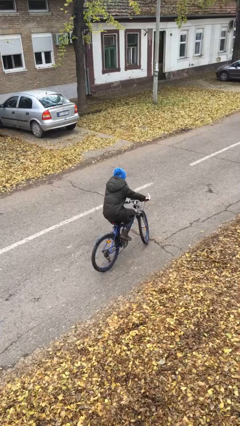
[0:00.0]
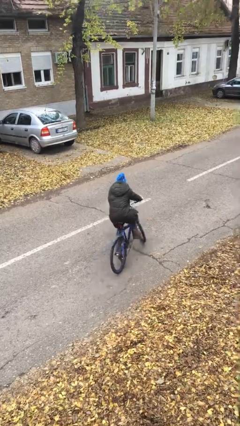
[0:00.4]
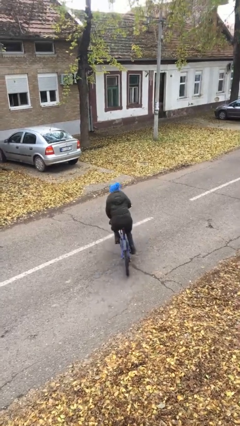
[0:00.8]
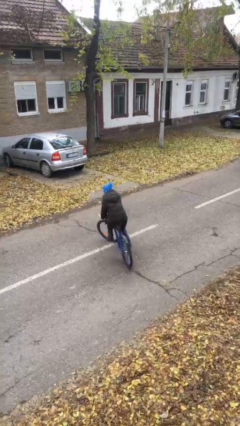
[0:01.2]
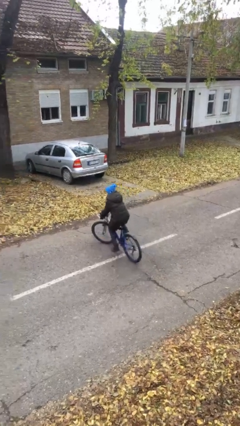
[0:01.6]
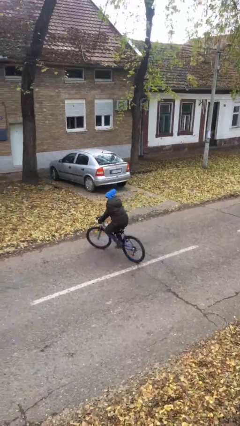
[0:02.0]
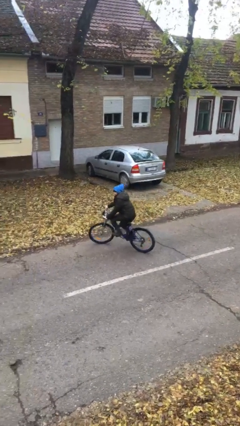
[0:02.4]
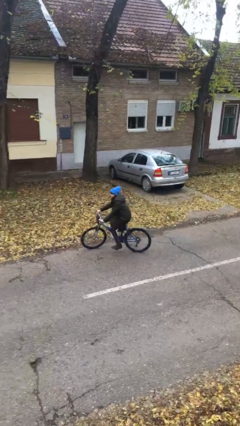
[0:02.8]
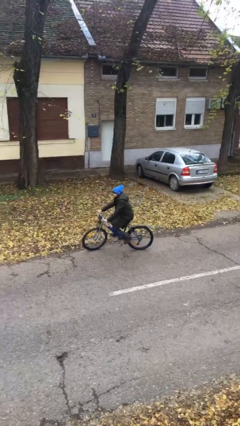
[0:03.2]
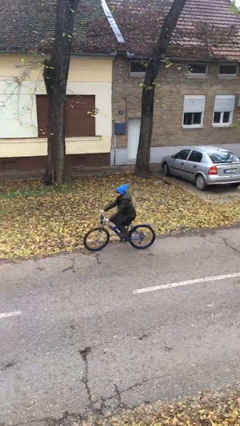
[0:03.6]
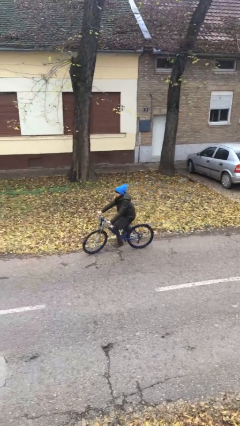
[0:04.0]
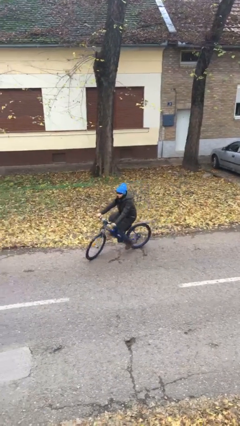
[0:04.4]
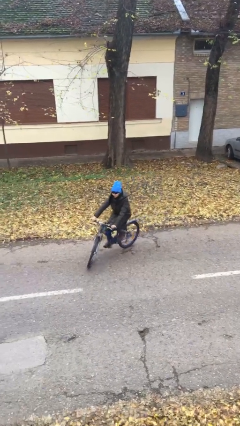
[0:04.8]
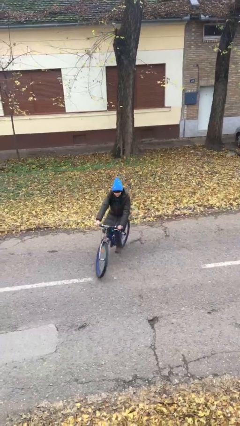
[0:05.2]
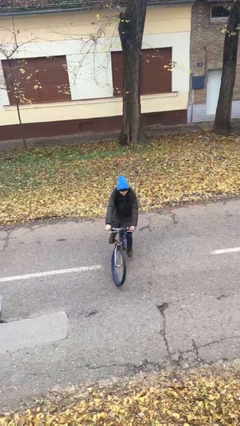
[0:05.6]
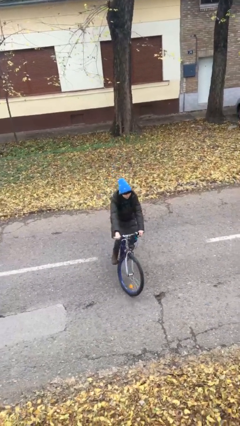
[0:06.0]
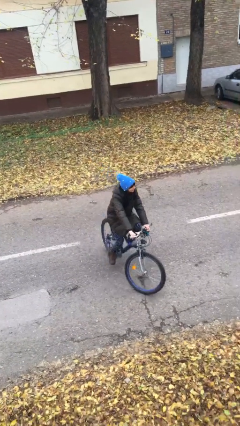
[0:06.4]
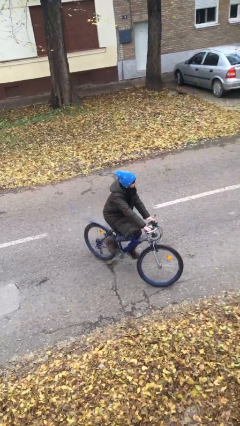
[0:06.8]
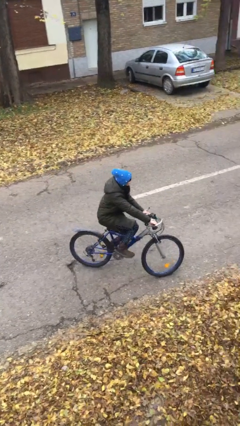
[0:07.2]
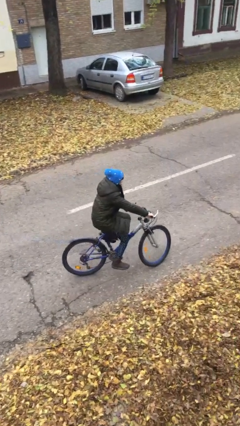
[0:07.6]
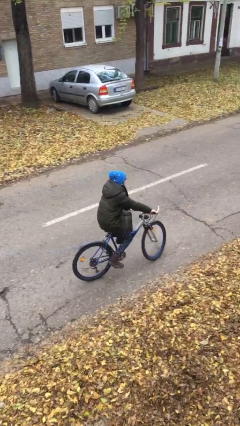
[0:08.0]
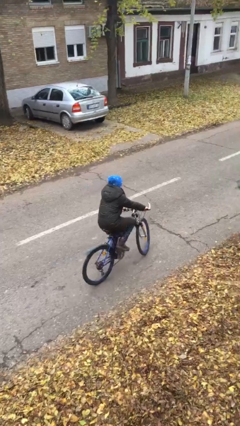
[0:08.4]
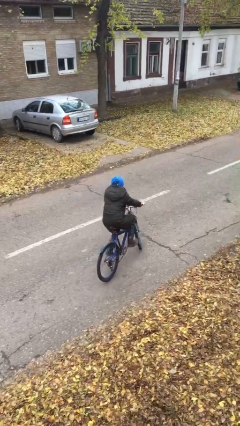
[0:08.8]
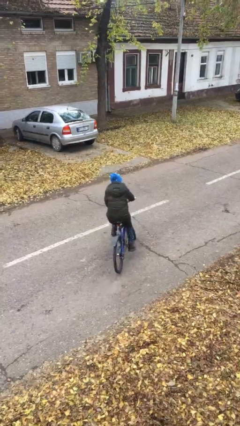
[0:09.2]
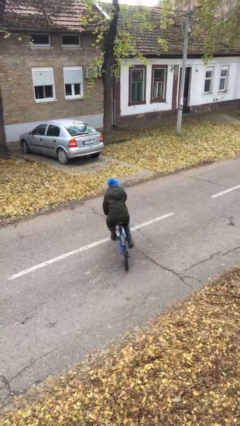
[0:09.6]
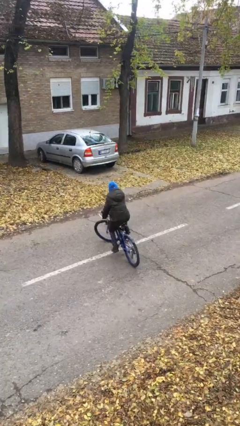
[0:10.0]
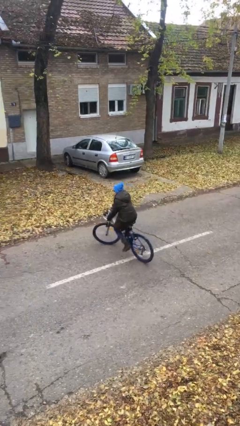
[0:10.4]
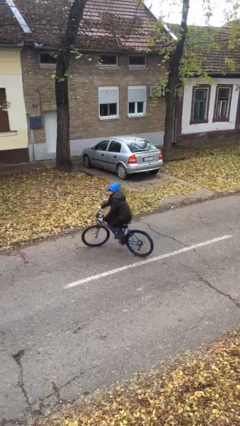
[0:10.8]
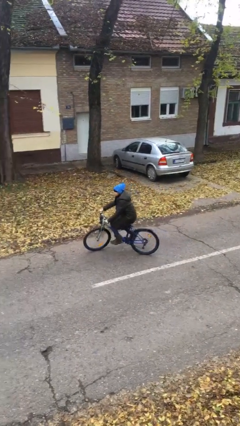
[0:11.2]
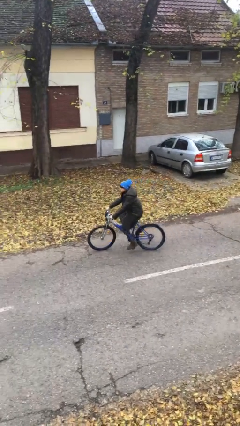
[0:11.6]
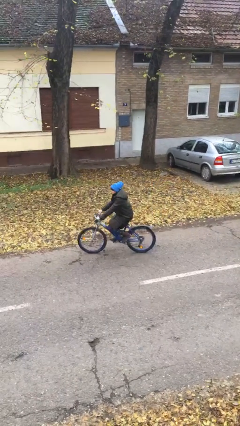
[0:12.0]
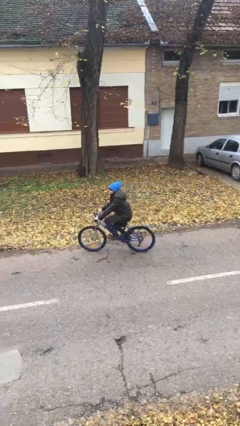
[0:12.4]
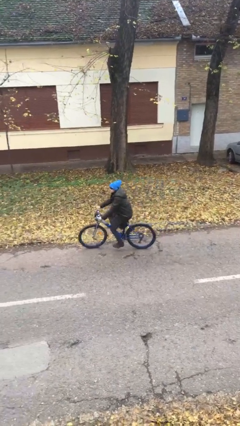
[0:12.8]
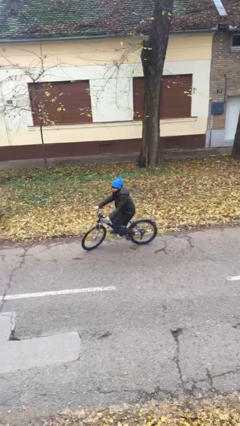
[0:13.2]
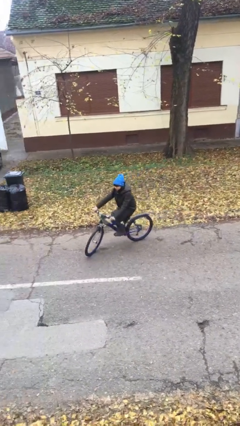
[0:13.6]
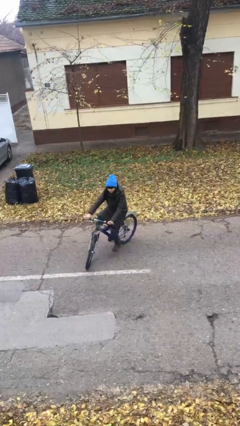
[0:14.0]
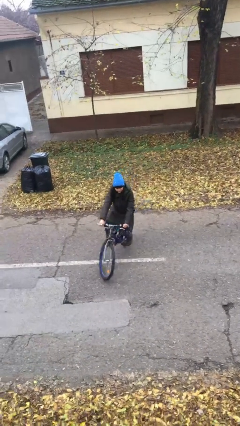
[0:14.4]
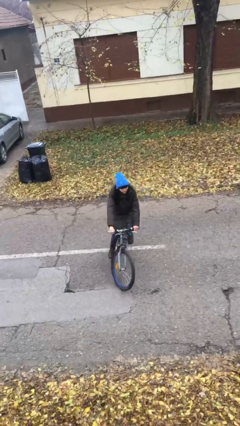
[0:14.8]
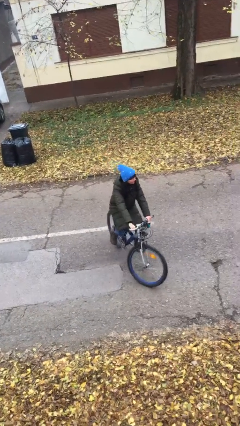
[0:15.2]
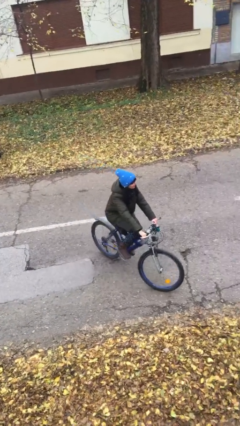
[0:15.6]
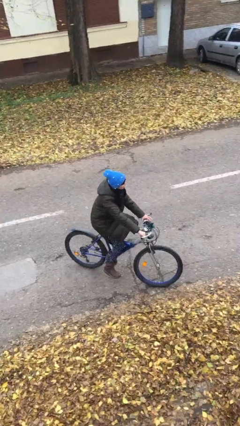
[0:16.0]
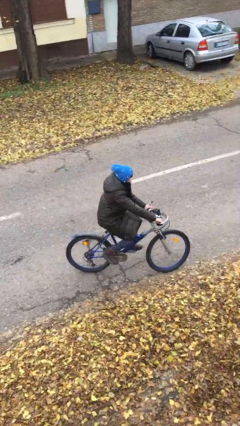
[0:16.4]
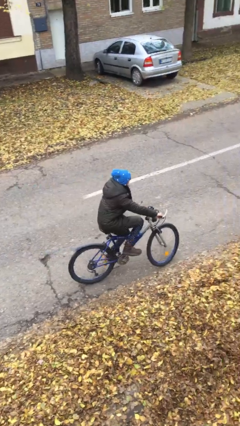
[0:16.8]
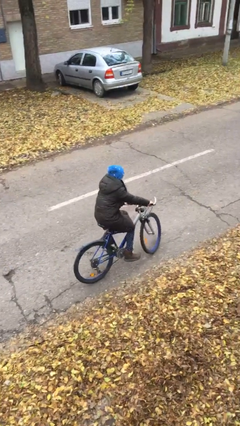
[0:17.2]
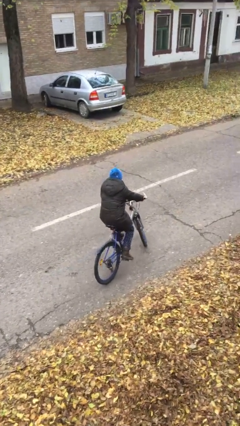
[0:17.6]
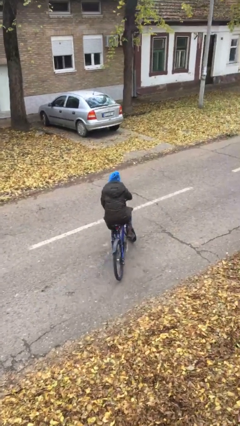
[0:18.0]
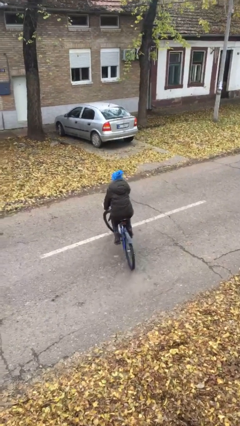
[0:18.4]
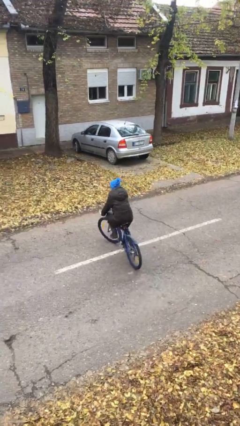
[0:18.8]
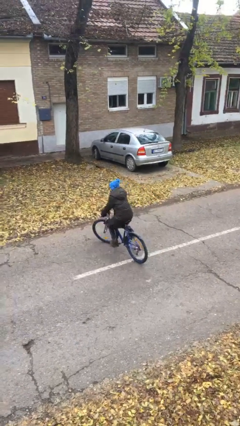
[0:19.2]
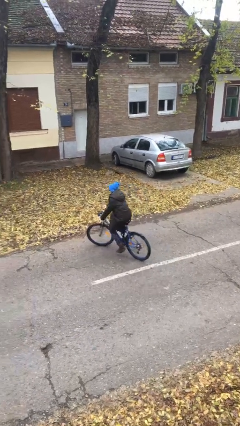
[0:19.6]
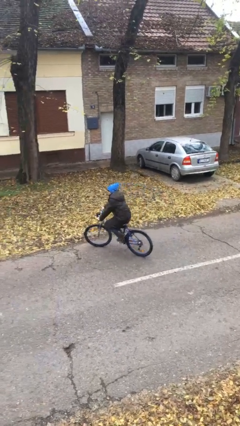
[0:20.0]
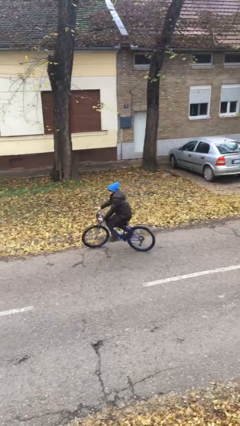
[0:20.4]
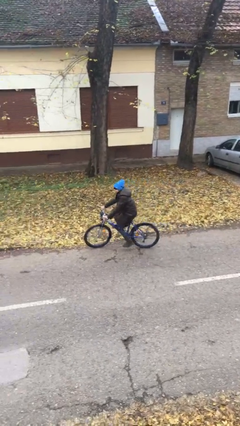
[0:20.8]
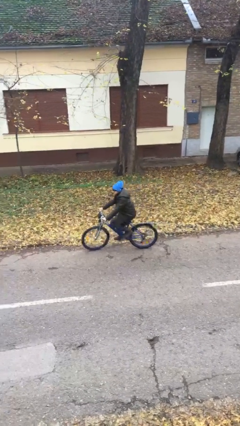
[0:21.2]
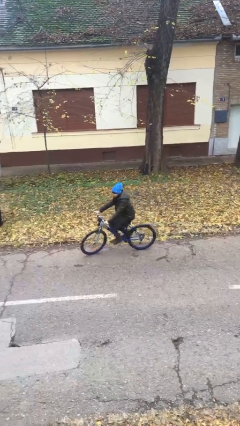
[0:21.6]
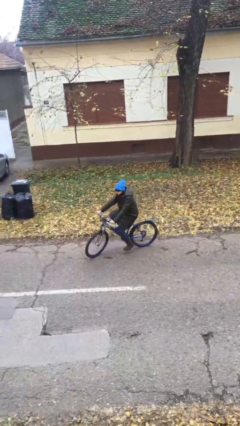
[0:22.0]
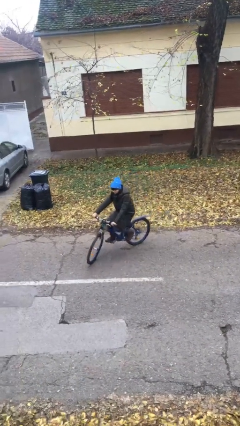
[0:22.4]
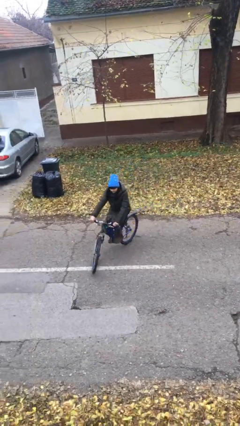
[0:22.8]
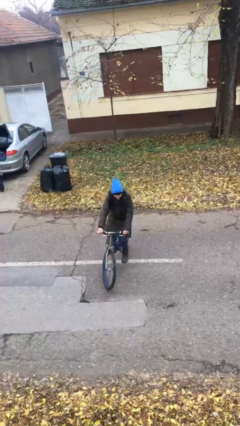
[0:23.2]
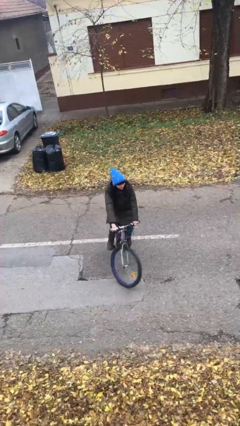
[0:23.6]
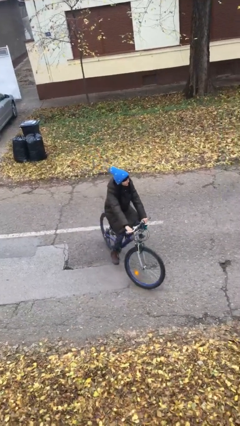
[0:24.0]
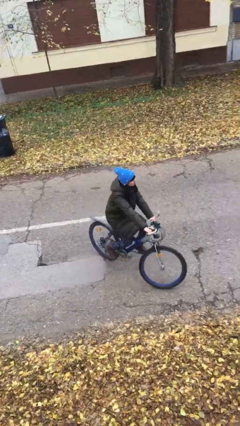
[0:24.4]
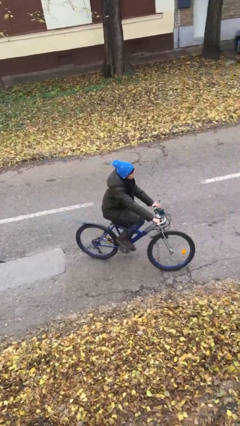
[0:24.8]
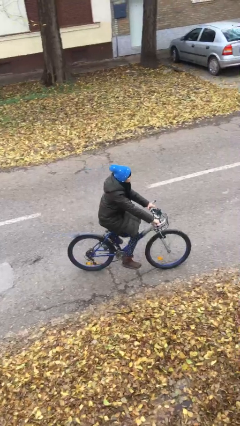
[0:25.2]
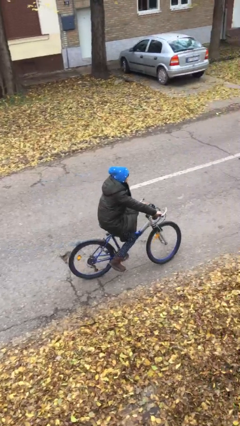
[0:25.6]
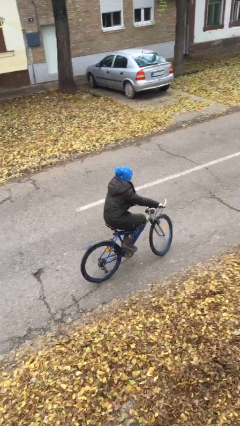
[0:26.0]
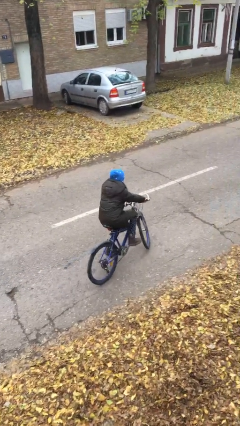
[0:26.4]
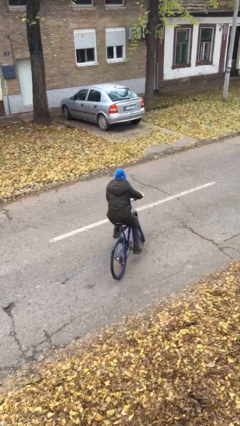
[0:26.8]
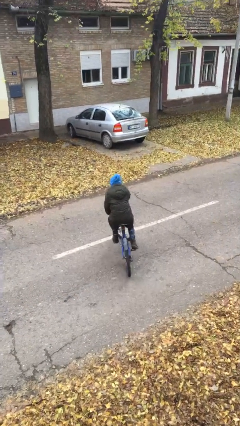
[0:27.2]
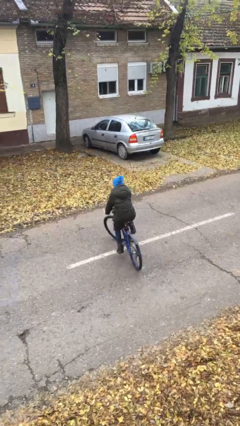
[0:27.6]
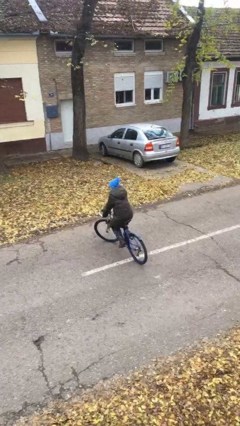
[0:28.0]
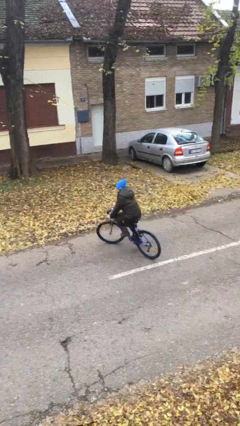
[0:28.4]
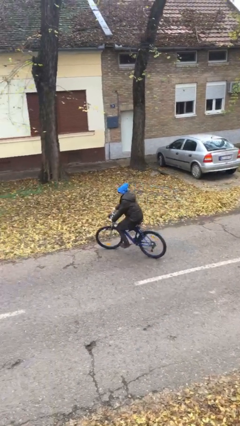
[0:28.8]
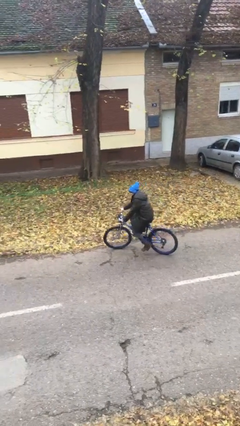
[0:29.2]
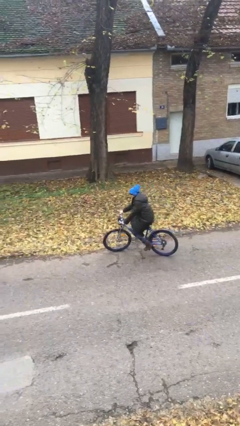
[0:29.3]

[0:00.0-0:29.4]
person rides bicycle

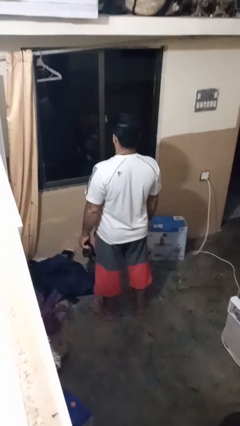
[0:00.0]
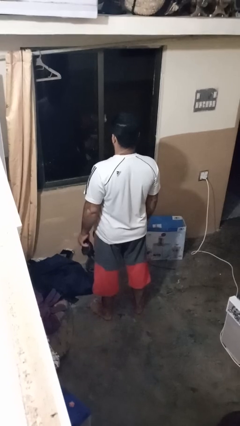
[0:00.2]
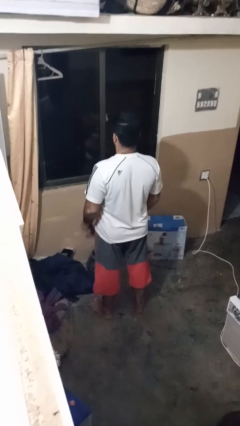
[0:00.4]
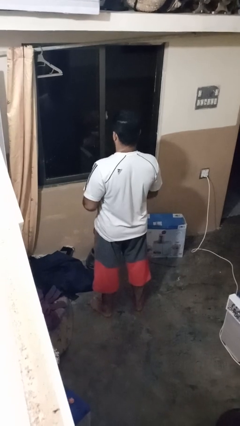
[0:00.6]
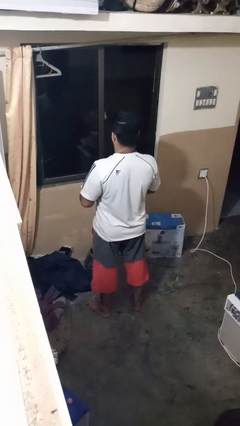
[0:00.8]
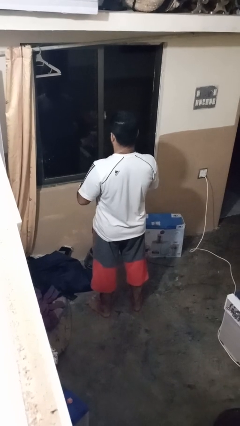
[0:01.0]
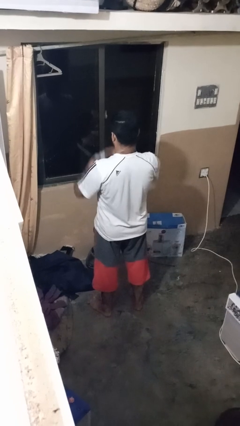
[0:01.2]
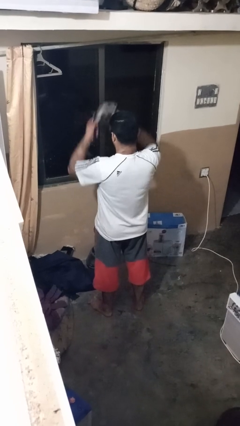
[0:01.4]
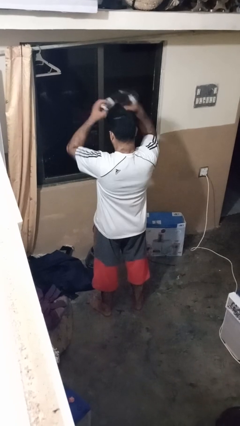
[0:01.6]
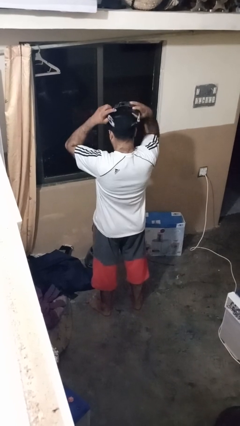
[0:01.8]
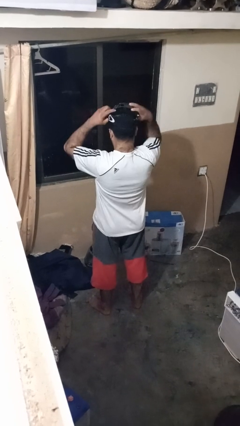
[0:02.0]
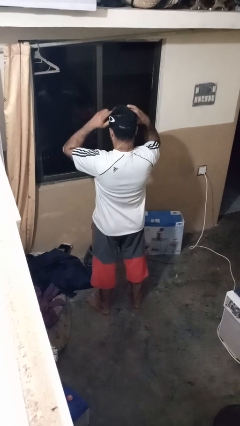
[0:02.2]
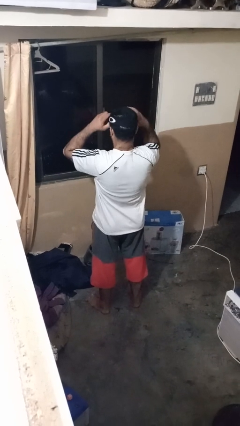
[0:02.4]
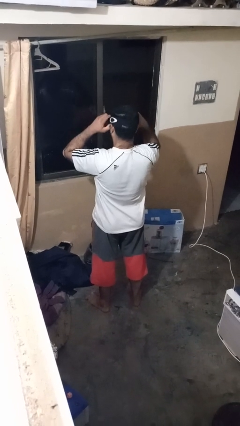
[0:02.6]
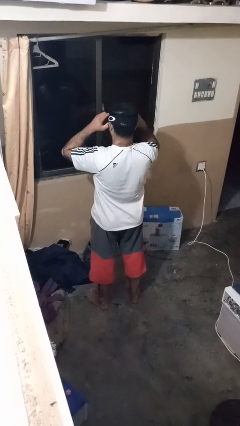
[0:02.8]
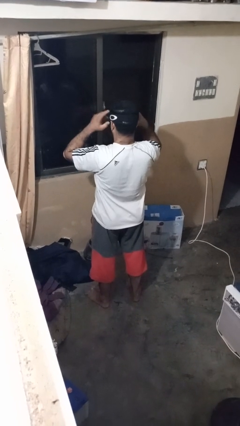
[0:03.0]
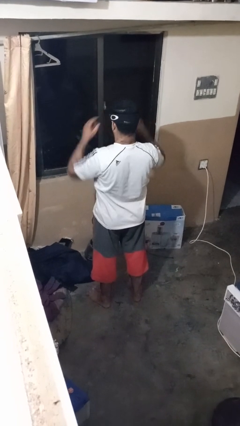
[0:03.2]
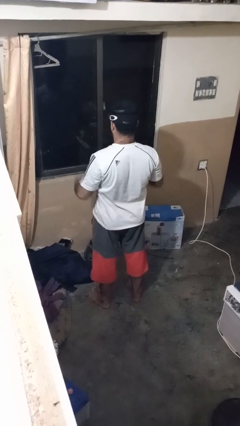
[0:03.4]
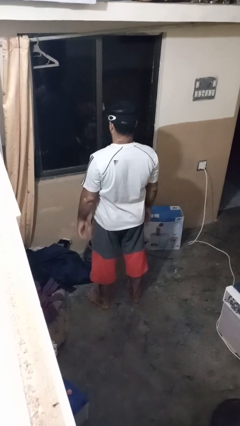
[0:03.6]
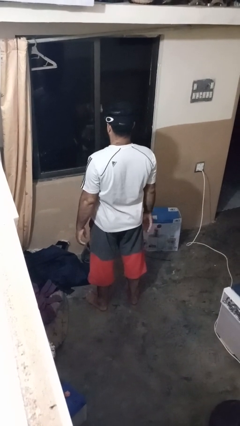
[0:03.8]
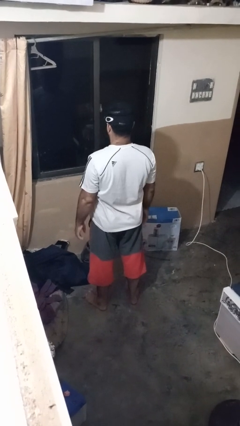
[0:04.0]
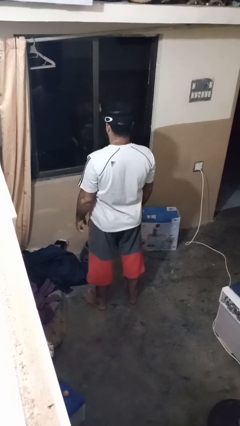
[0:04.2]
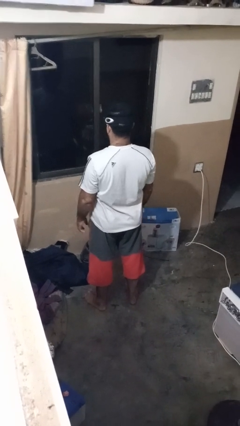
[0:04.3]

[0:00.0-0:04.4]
person puts on sunglasses
